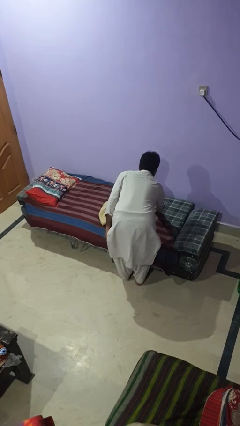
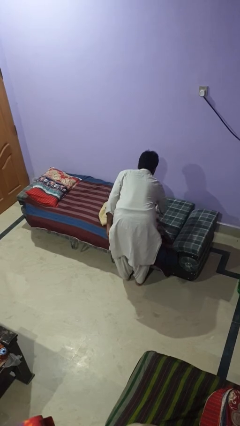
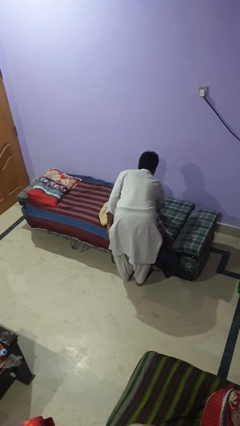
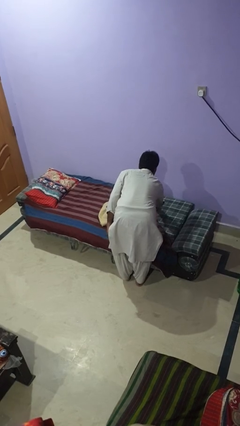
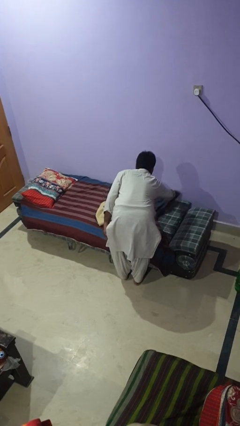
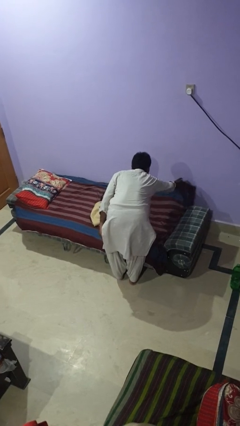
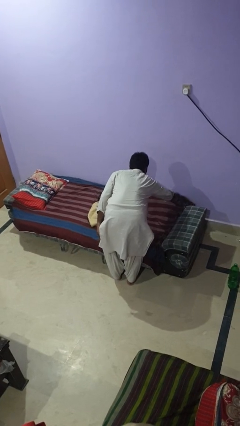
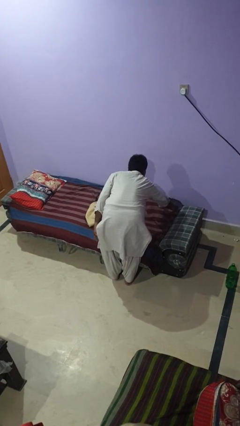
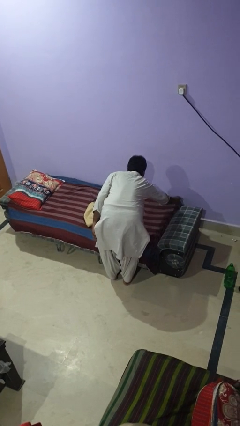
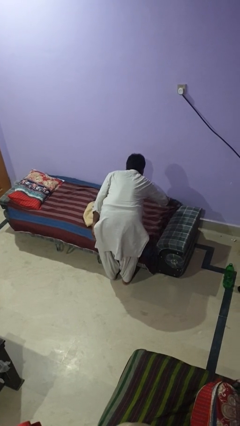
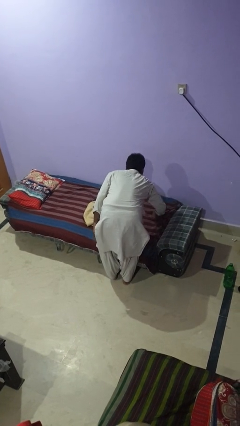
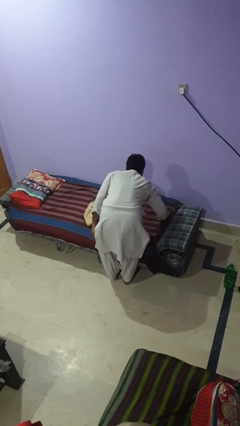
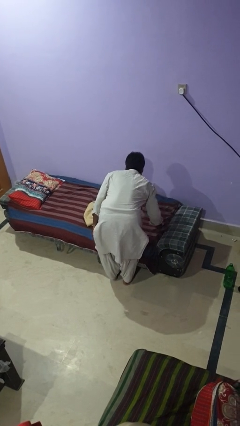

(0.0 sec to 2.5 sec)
person makes bed

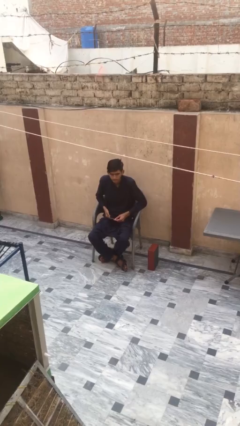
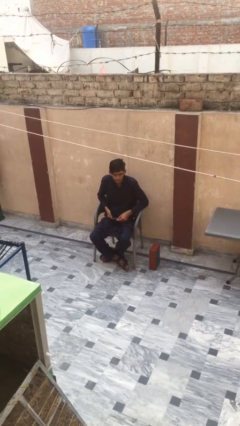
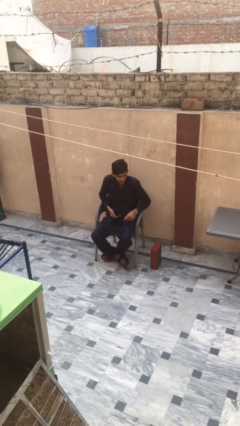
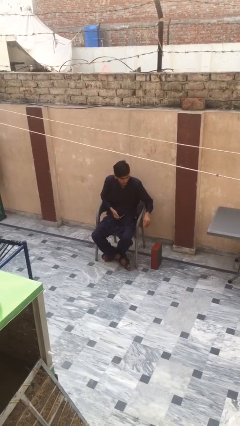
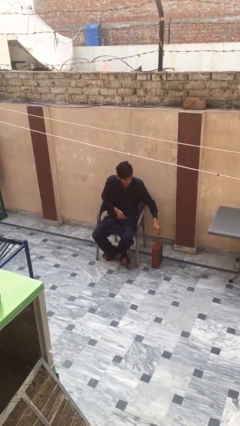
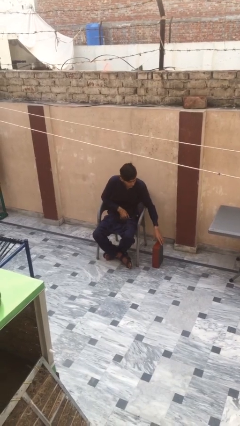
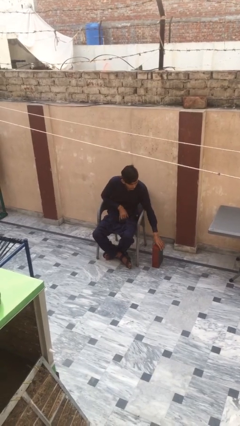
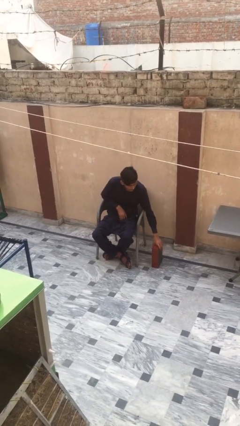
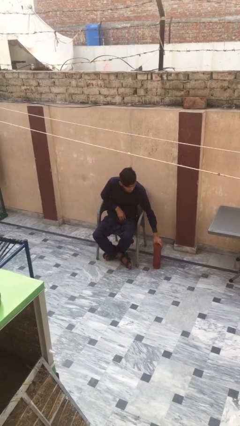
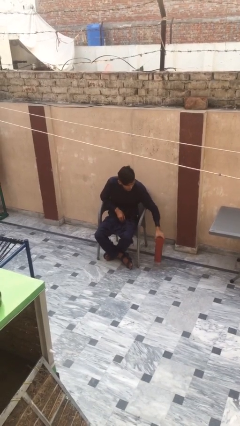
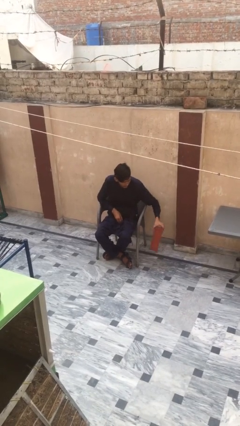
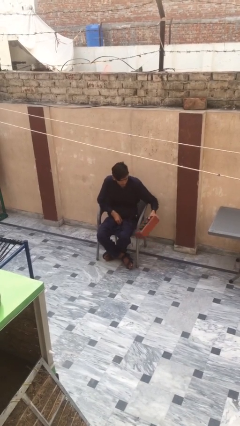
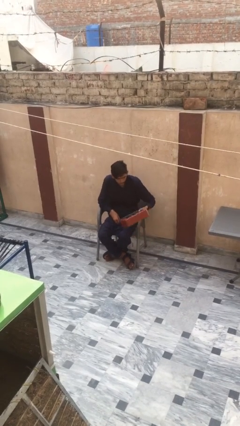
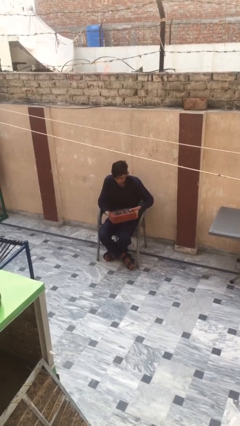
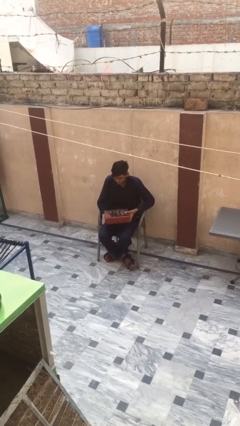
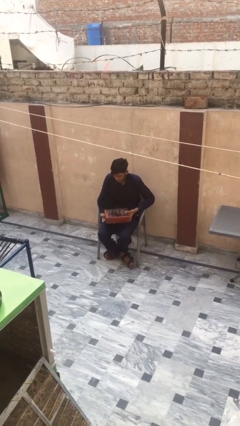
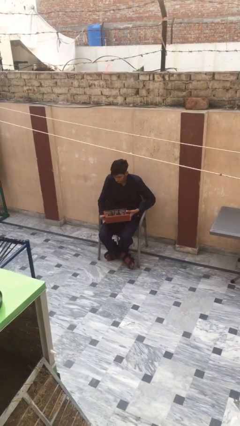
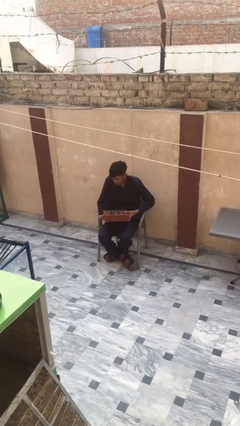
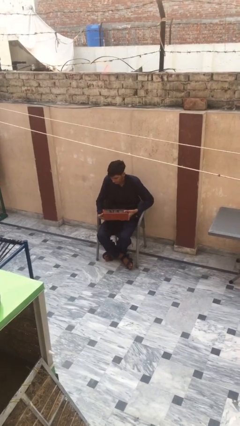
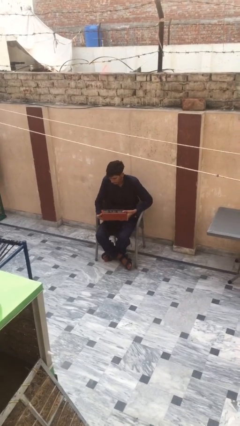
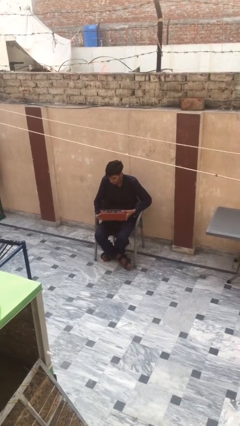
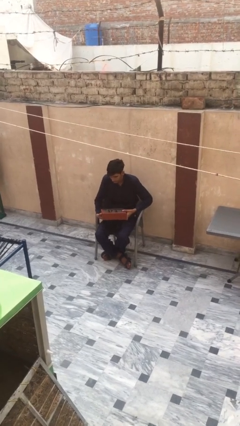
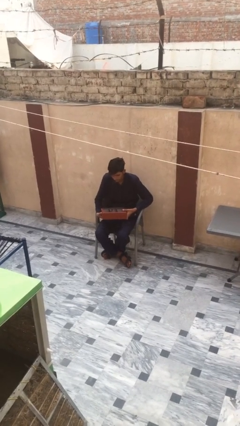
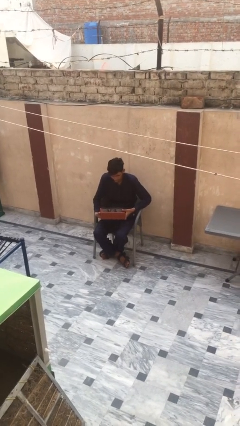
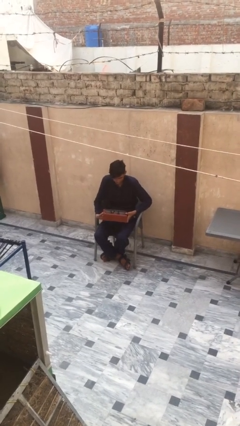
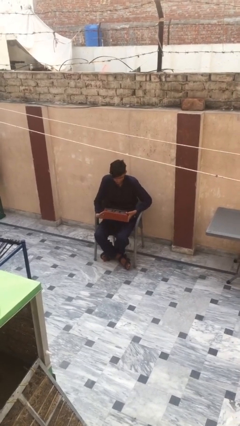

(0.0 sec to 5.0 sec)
person picks up object from floor

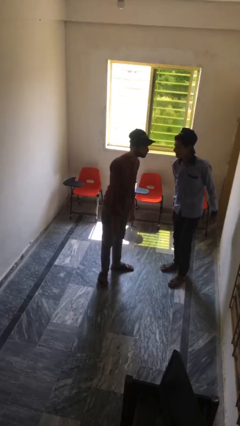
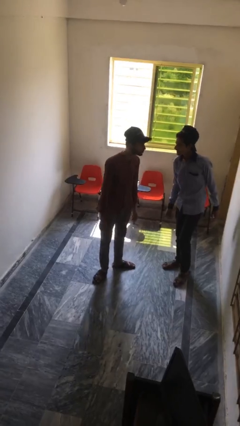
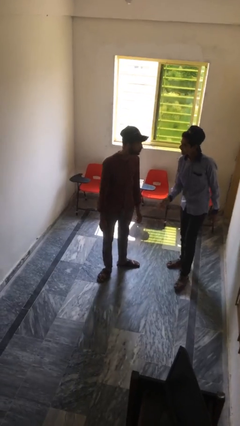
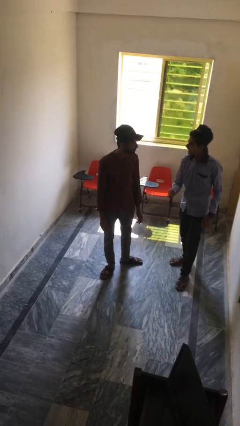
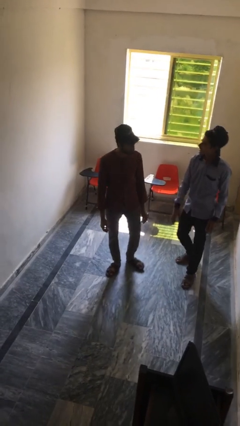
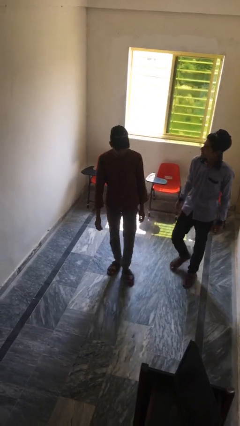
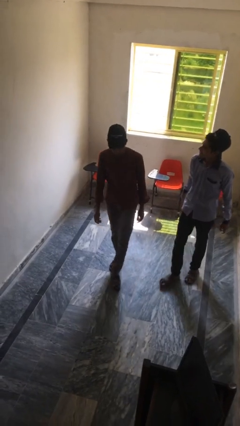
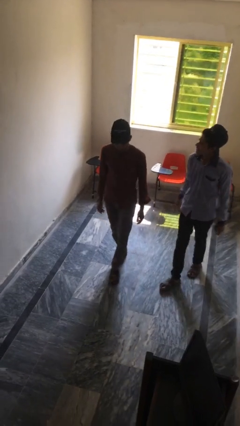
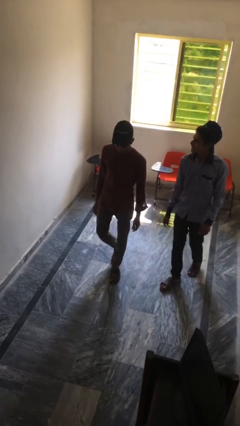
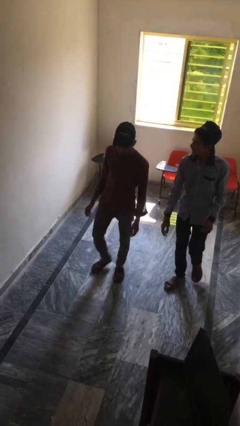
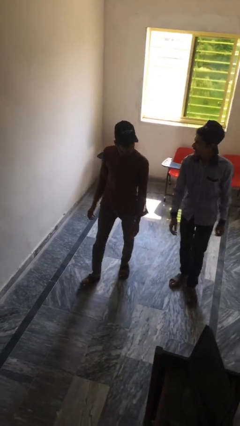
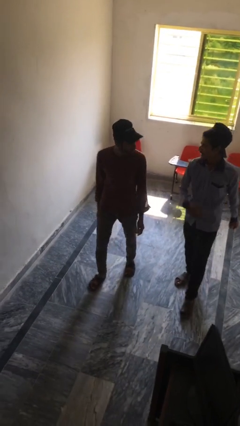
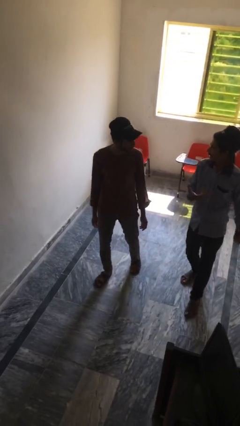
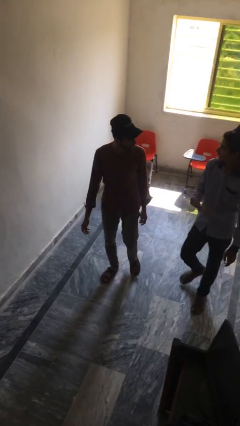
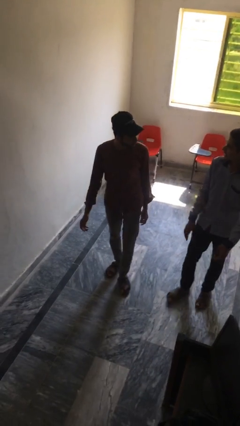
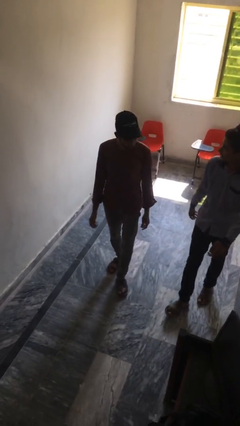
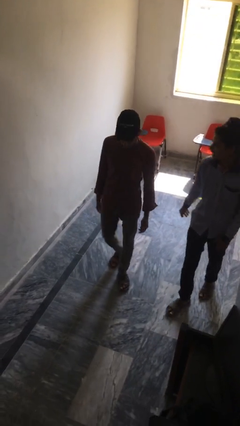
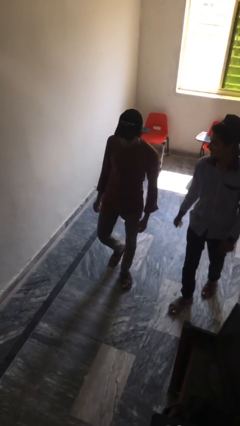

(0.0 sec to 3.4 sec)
person talks to person

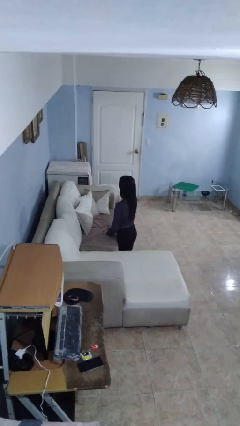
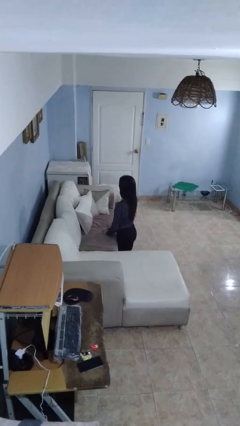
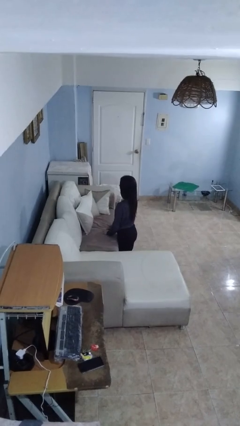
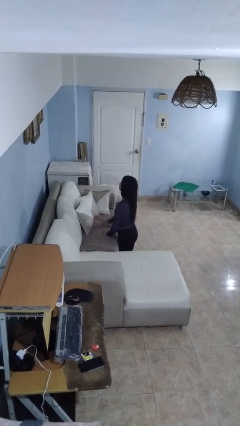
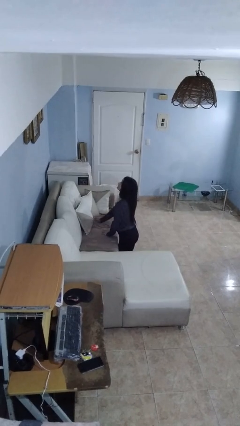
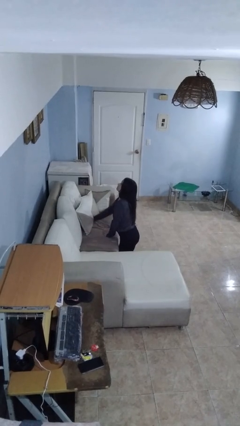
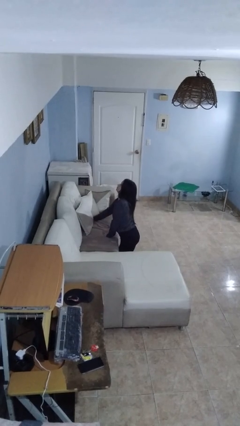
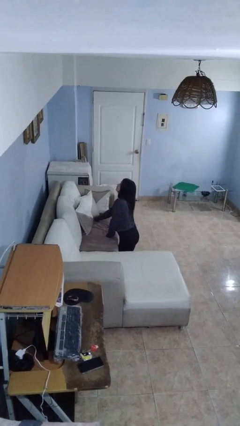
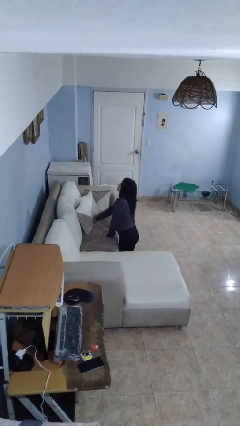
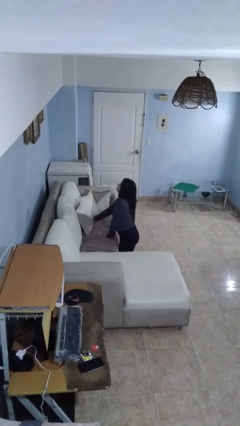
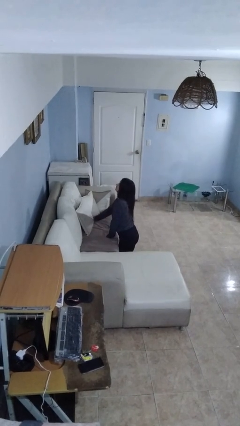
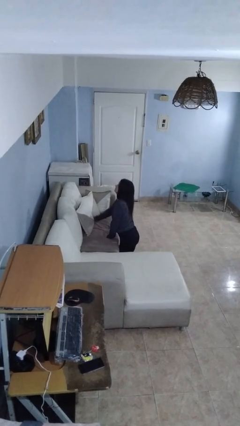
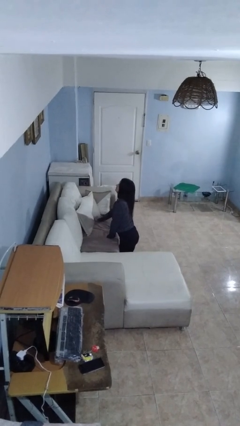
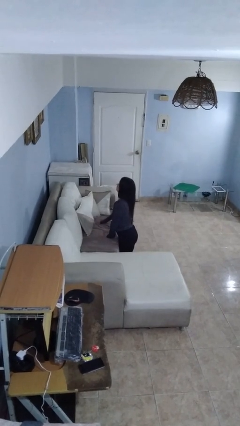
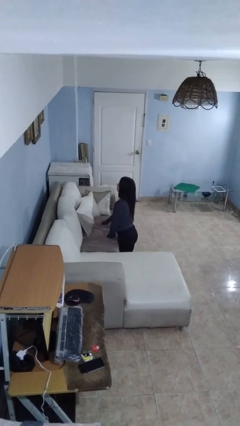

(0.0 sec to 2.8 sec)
person searches in couch

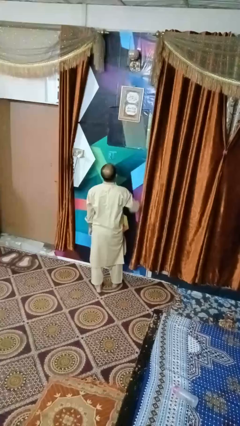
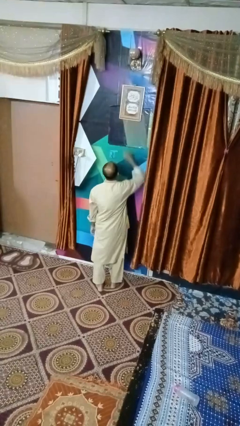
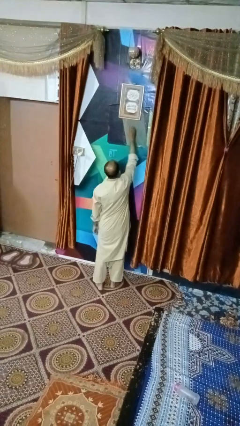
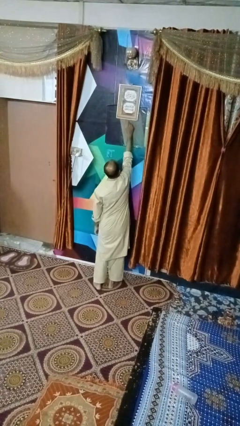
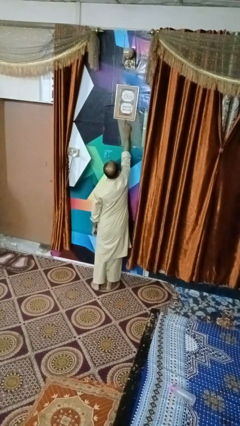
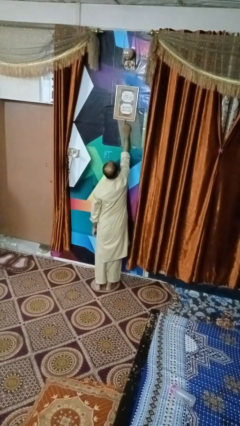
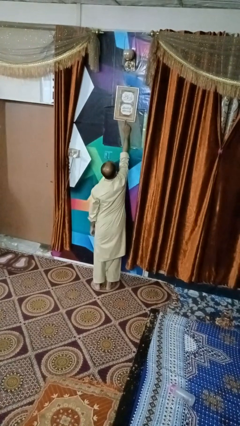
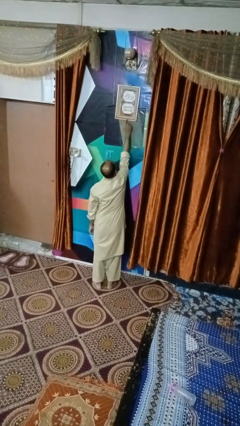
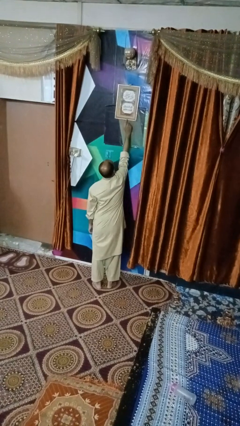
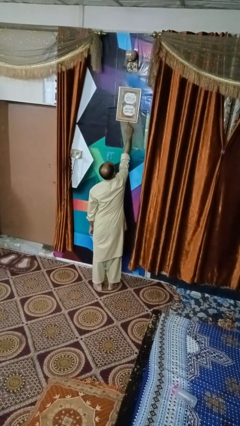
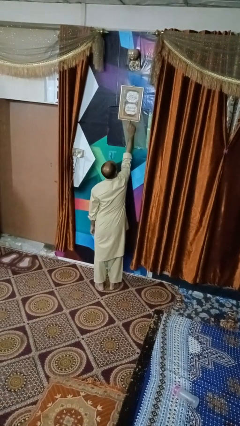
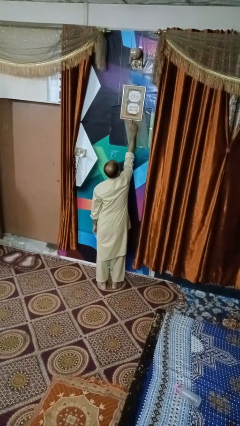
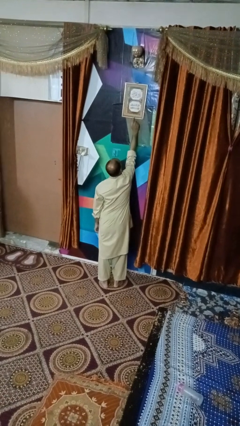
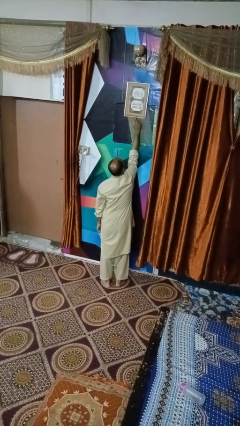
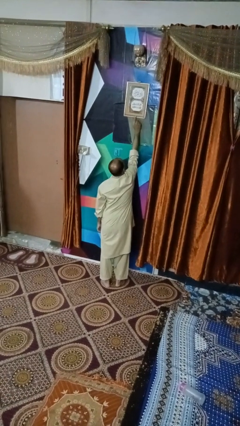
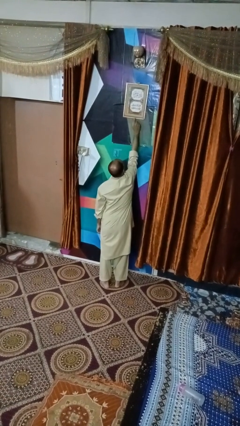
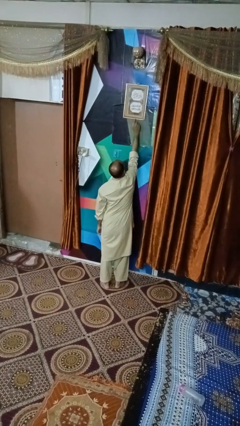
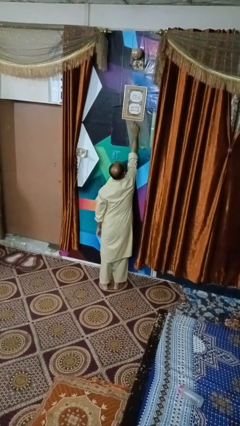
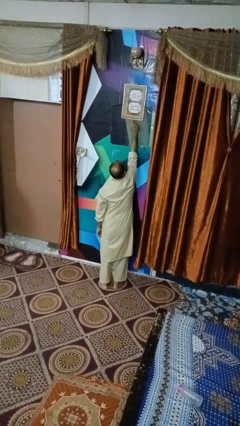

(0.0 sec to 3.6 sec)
person taps object with finger
